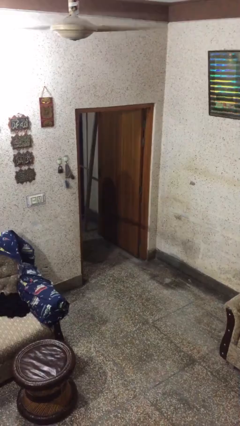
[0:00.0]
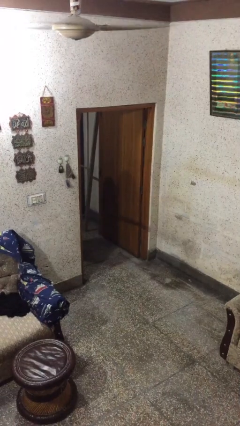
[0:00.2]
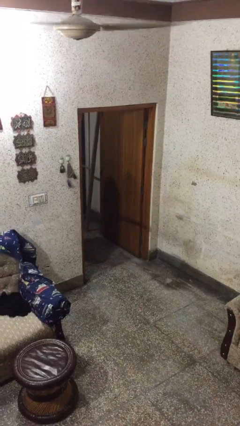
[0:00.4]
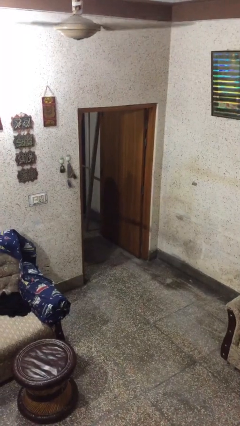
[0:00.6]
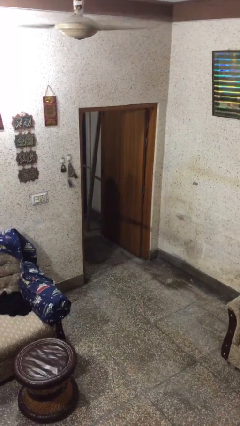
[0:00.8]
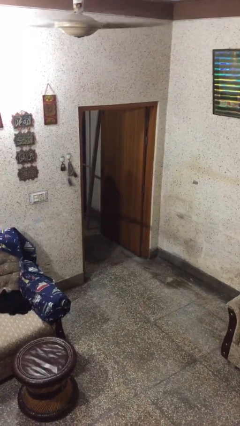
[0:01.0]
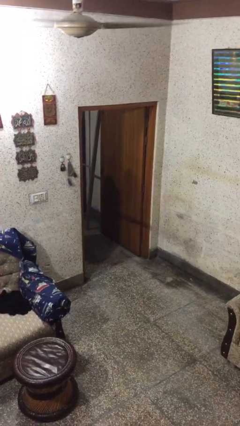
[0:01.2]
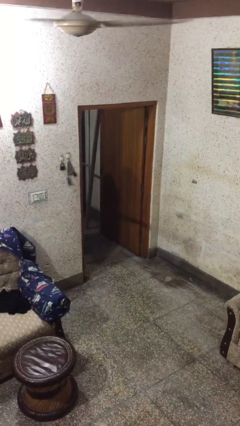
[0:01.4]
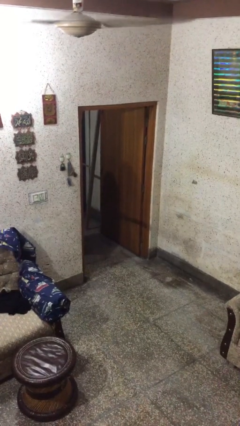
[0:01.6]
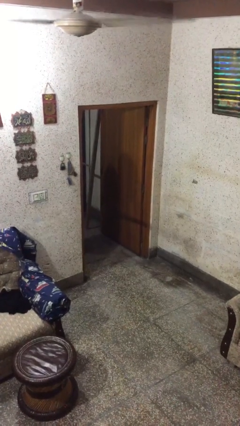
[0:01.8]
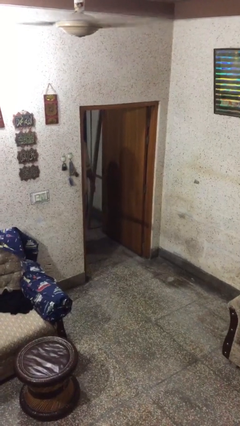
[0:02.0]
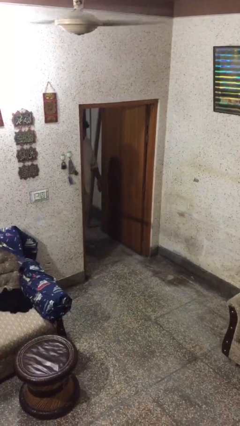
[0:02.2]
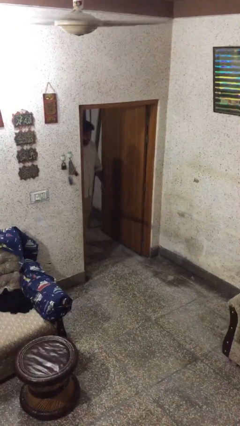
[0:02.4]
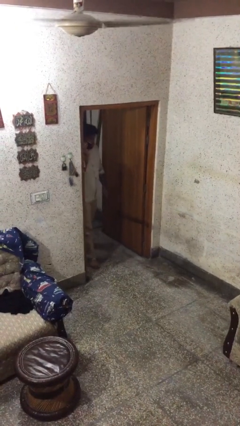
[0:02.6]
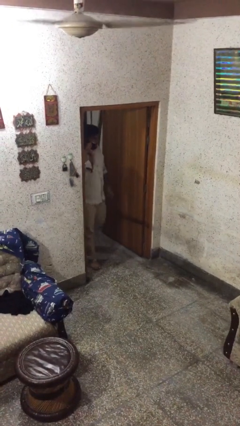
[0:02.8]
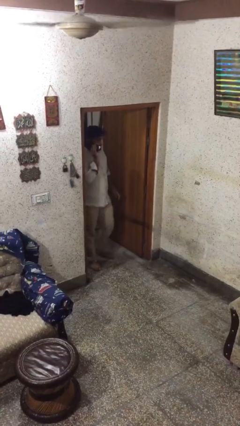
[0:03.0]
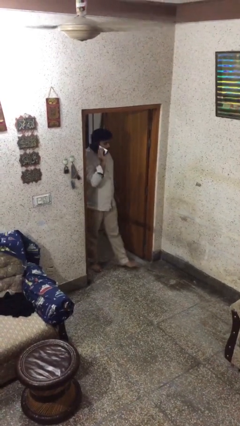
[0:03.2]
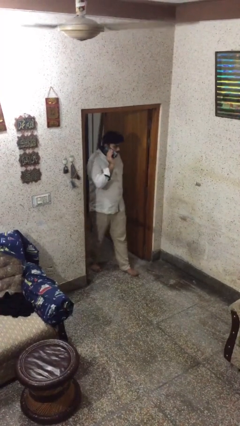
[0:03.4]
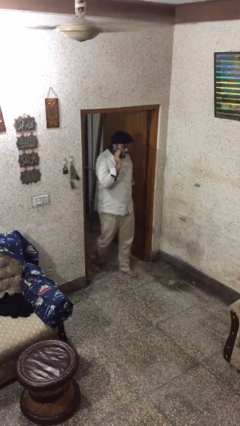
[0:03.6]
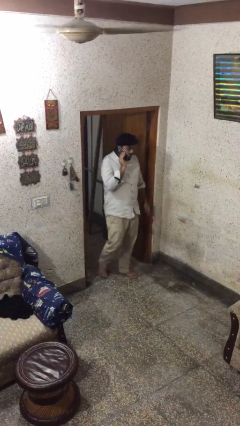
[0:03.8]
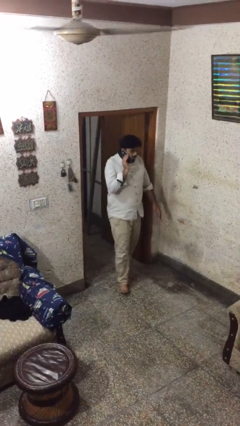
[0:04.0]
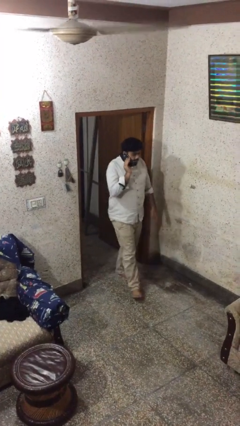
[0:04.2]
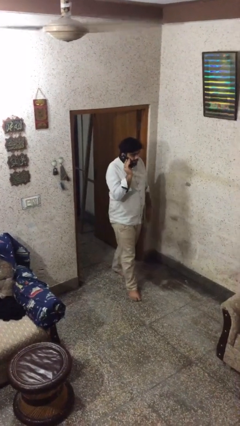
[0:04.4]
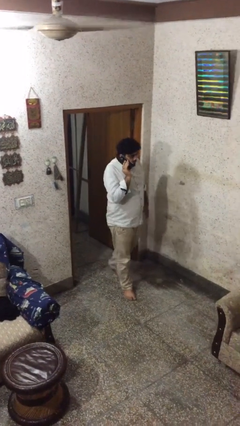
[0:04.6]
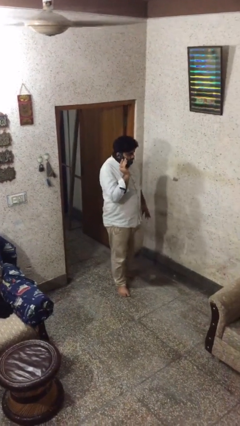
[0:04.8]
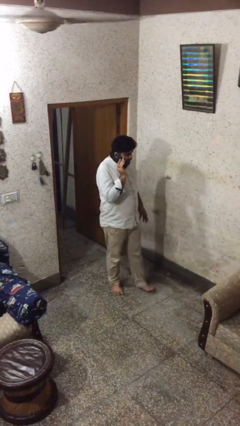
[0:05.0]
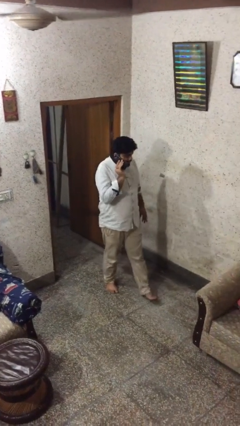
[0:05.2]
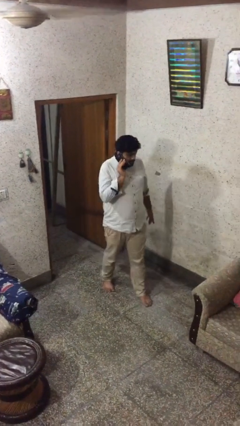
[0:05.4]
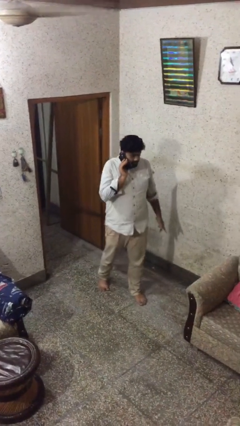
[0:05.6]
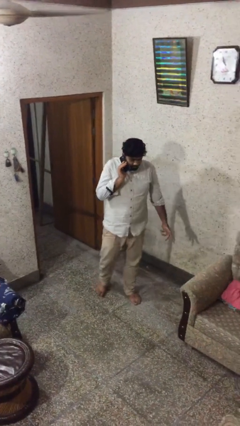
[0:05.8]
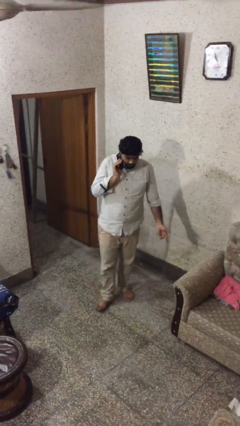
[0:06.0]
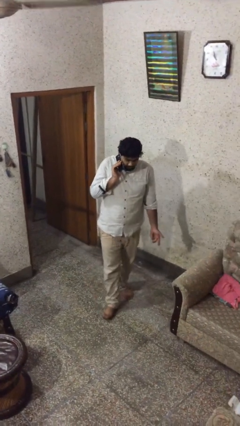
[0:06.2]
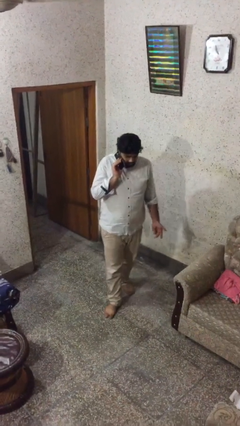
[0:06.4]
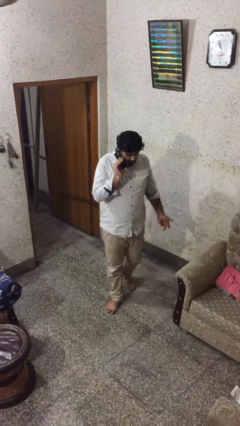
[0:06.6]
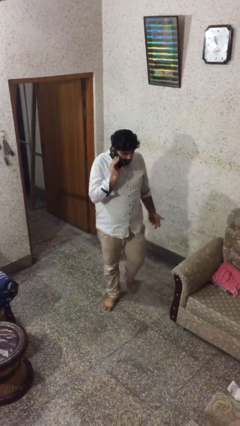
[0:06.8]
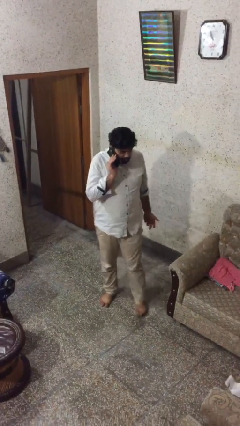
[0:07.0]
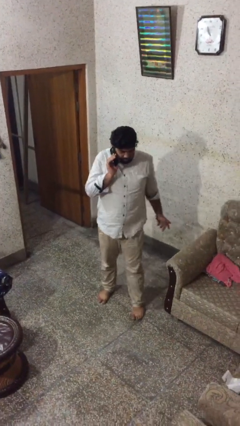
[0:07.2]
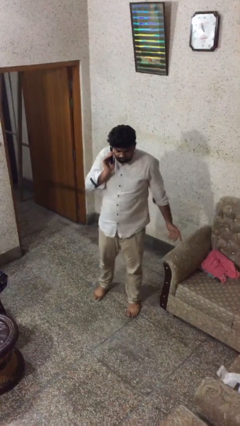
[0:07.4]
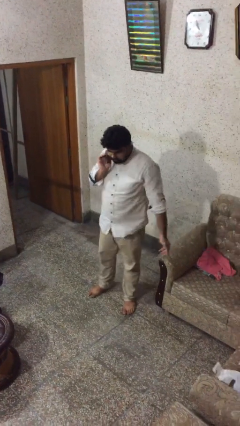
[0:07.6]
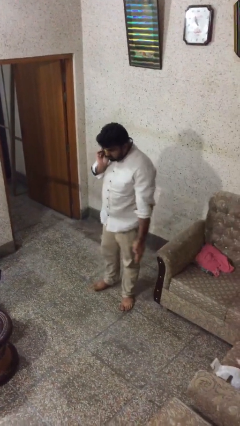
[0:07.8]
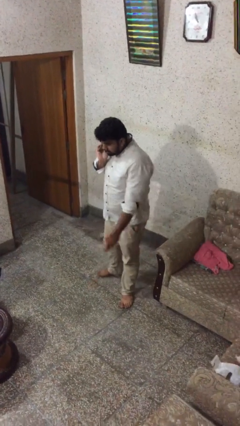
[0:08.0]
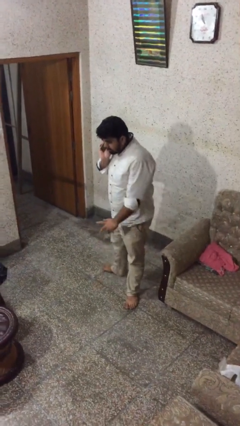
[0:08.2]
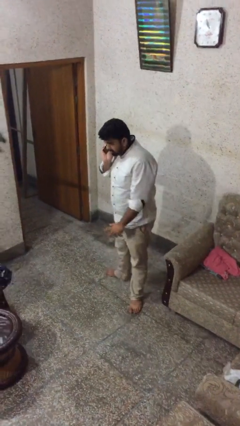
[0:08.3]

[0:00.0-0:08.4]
person enters scene through structure

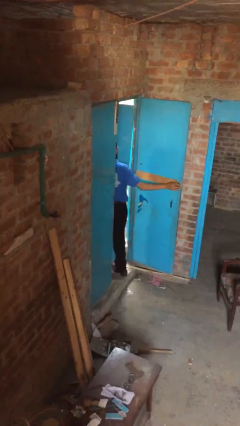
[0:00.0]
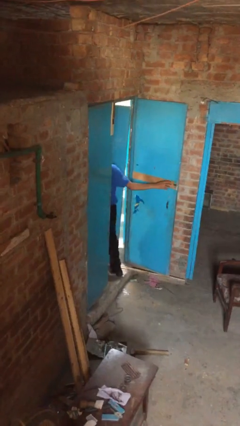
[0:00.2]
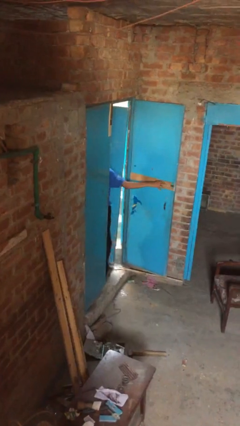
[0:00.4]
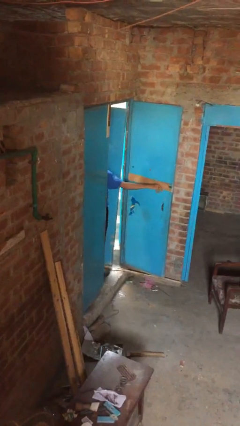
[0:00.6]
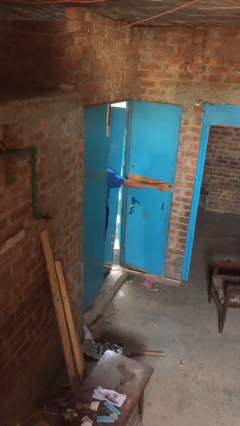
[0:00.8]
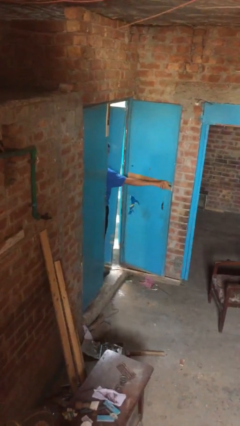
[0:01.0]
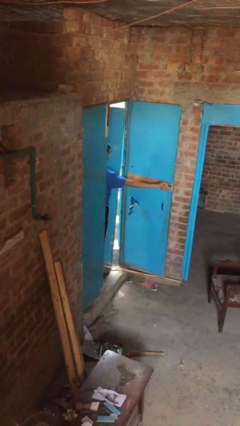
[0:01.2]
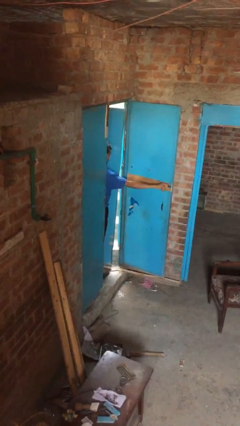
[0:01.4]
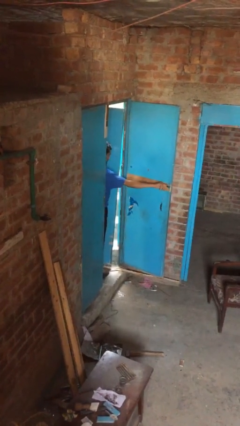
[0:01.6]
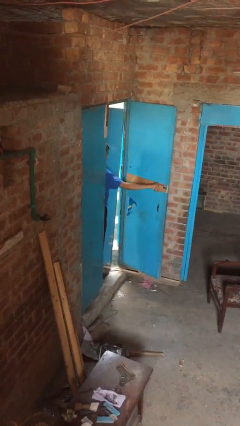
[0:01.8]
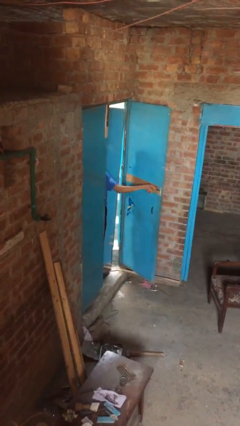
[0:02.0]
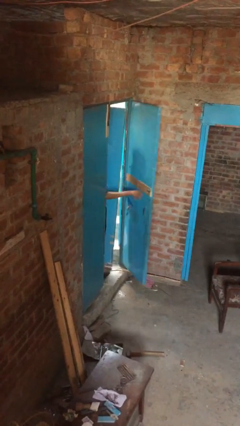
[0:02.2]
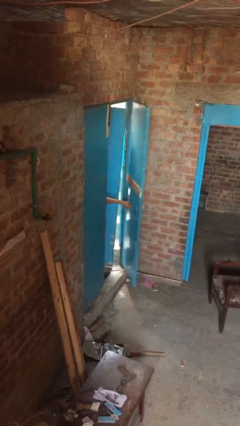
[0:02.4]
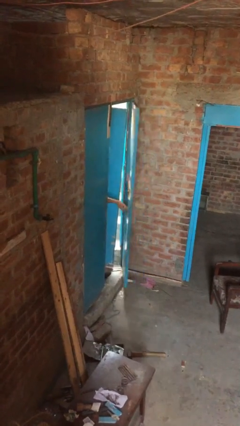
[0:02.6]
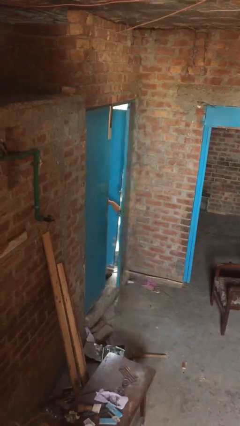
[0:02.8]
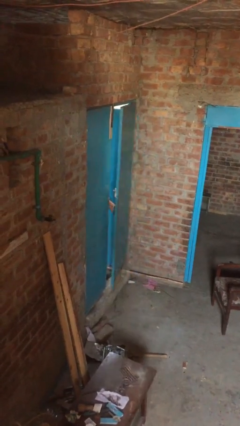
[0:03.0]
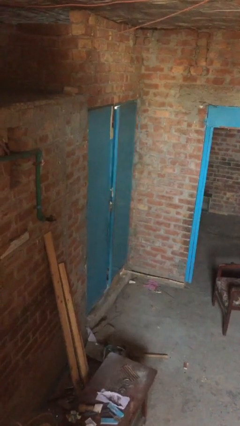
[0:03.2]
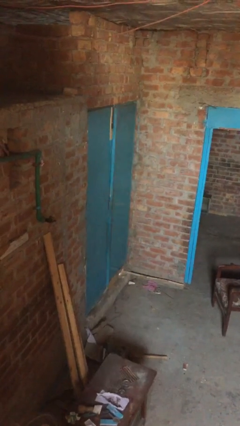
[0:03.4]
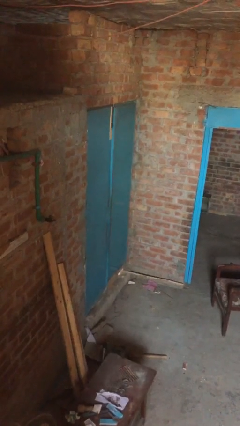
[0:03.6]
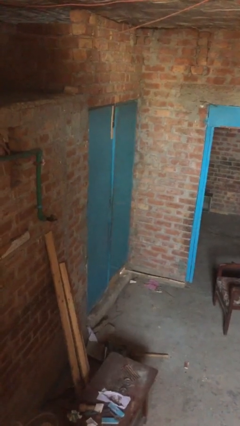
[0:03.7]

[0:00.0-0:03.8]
person closes facility door

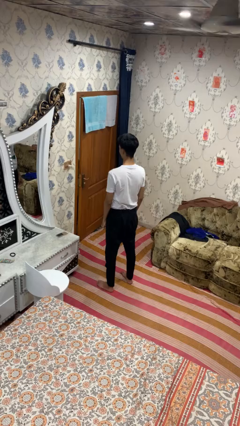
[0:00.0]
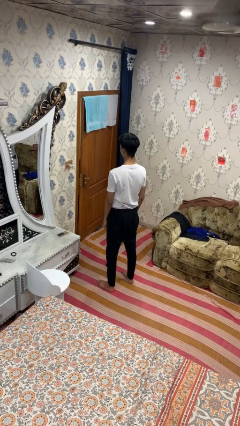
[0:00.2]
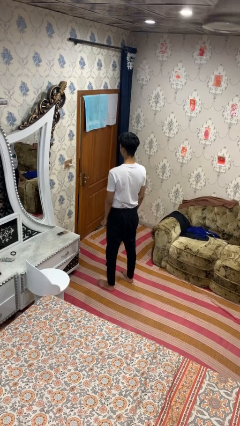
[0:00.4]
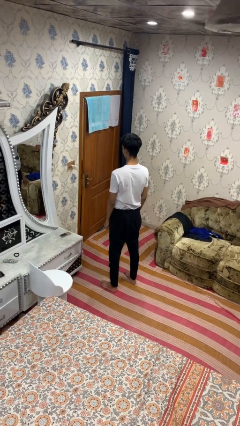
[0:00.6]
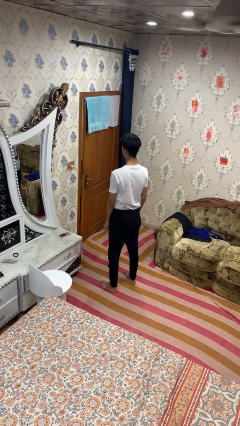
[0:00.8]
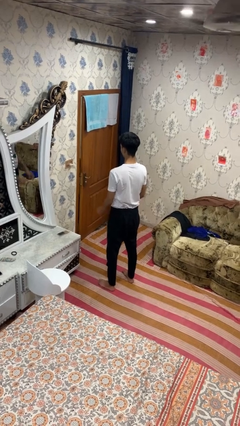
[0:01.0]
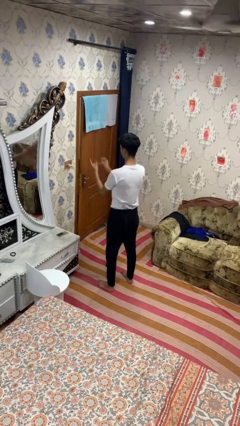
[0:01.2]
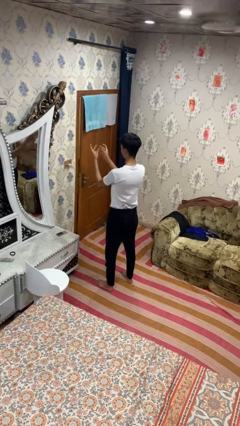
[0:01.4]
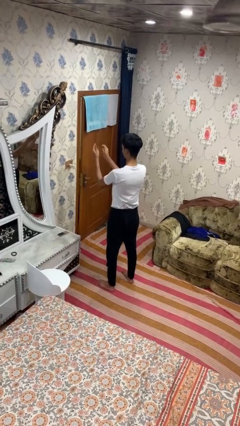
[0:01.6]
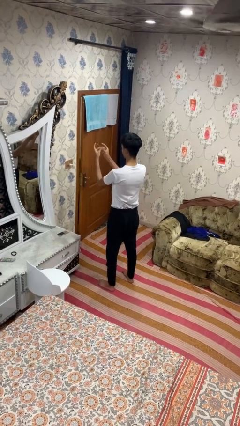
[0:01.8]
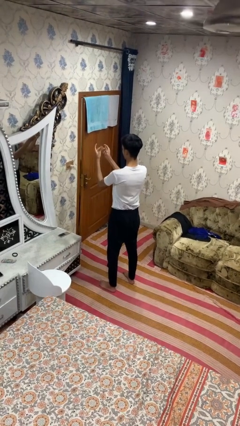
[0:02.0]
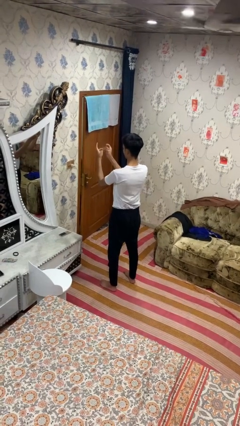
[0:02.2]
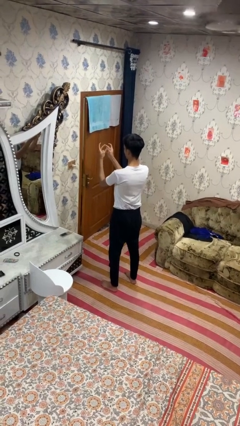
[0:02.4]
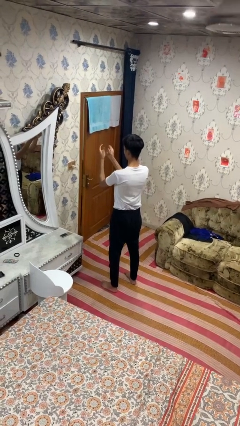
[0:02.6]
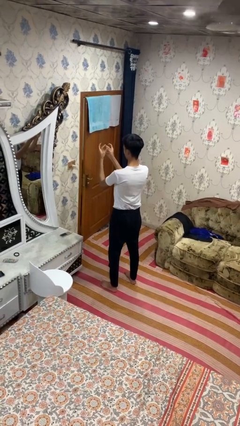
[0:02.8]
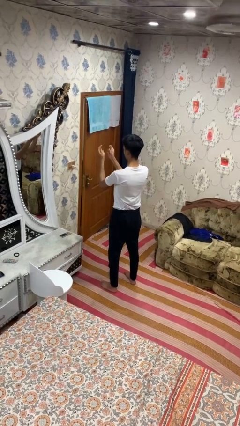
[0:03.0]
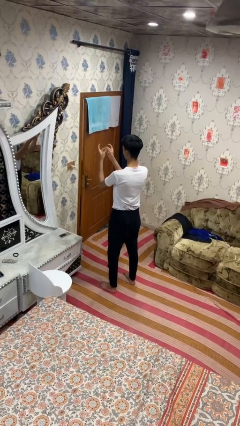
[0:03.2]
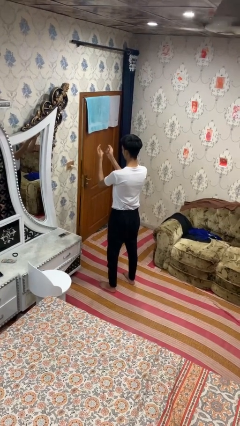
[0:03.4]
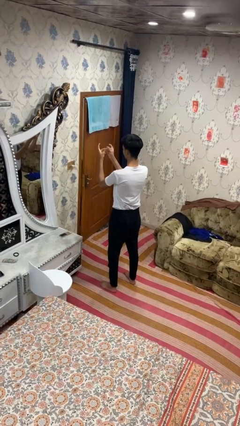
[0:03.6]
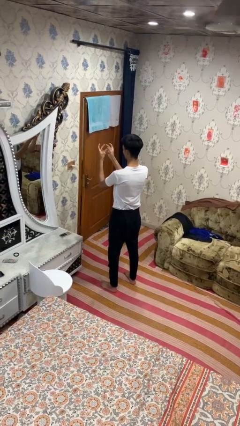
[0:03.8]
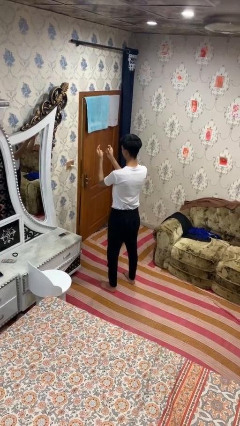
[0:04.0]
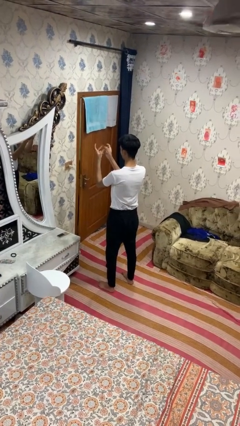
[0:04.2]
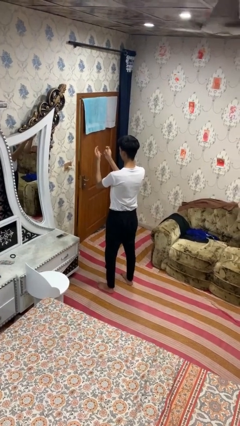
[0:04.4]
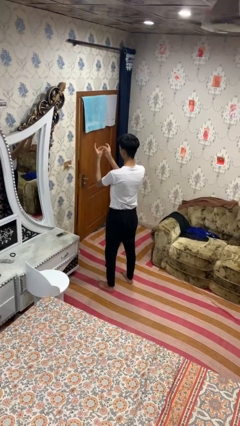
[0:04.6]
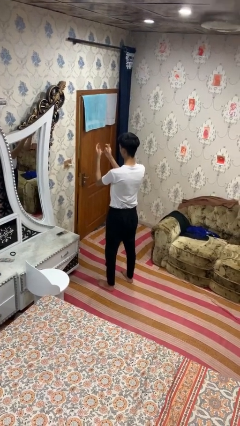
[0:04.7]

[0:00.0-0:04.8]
person snaps fingers

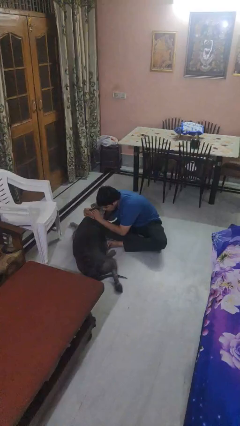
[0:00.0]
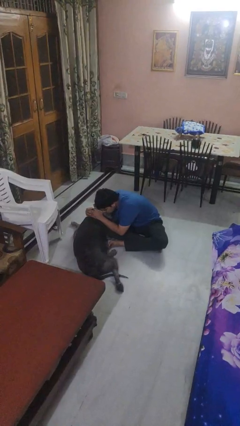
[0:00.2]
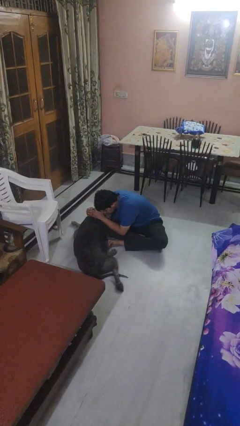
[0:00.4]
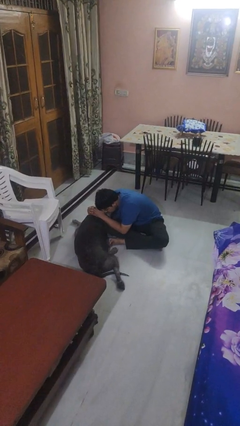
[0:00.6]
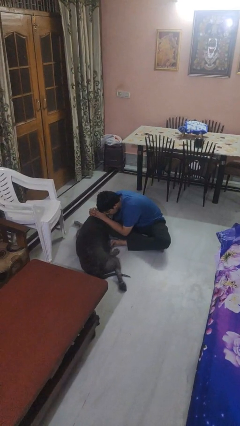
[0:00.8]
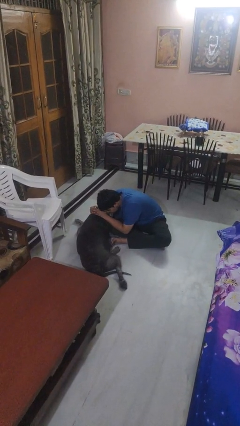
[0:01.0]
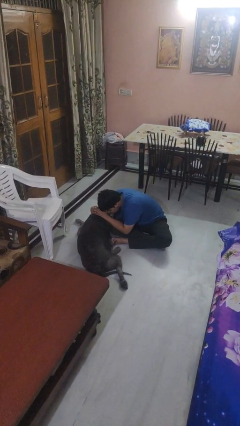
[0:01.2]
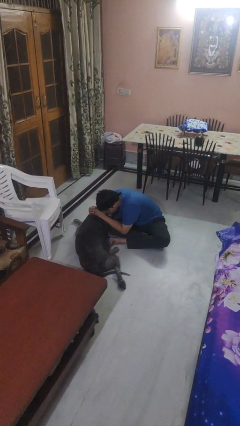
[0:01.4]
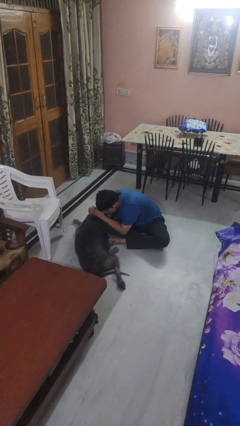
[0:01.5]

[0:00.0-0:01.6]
person hugs dog
